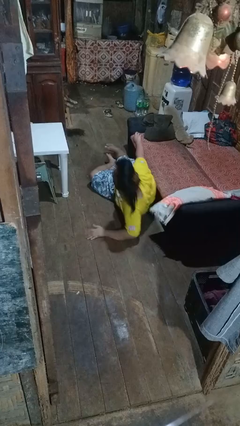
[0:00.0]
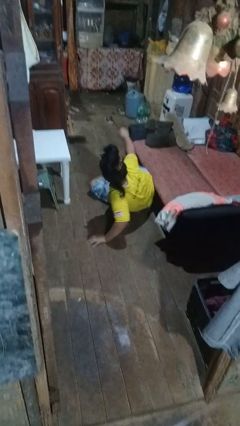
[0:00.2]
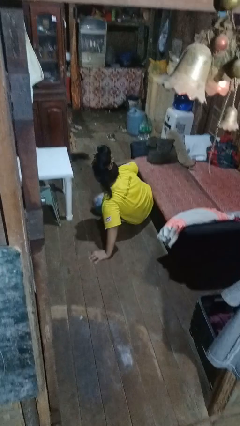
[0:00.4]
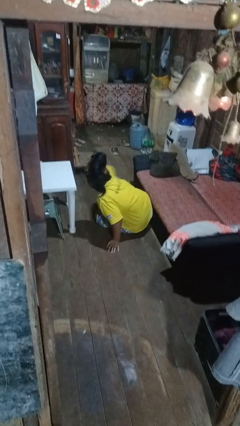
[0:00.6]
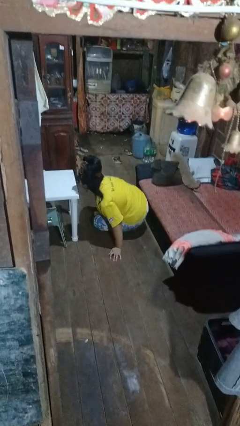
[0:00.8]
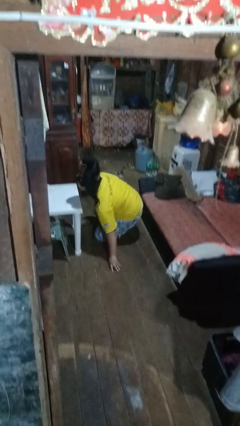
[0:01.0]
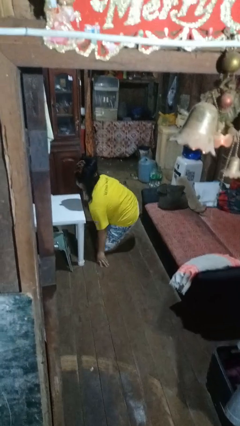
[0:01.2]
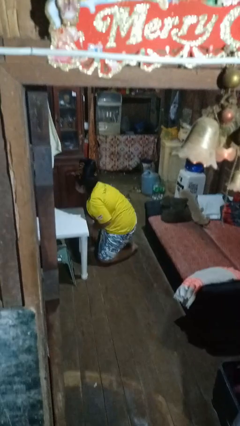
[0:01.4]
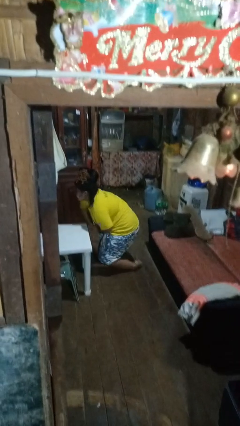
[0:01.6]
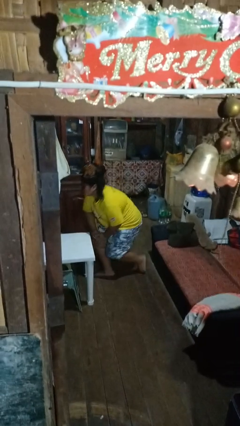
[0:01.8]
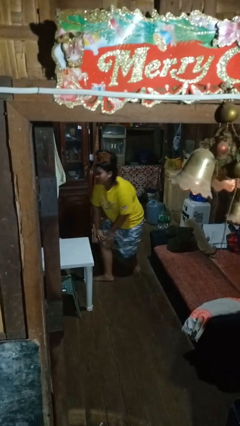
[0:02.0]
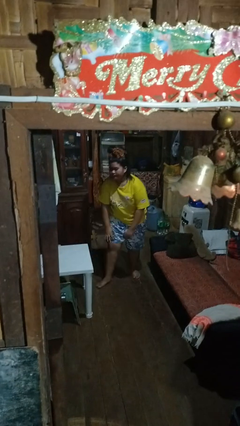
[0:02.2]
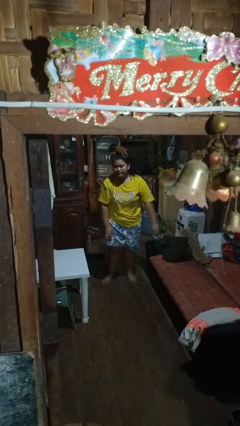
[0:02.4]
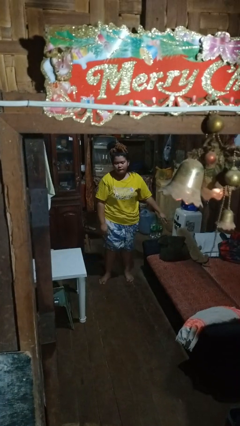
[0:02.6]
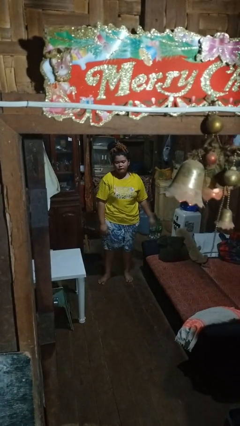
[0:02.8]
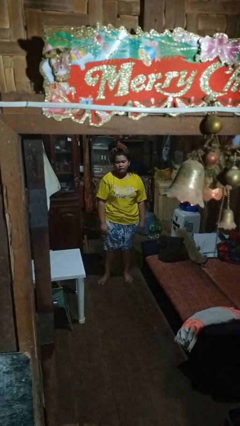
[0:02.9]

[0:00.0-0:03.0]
person stands up from floor

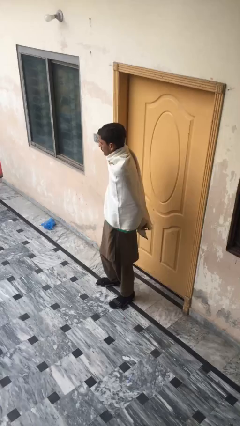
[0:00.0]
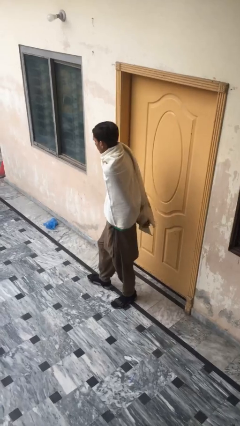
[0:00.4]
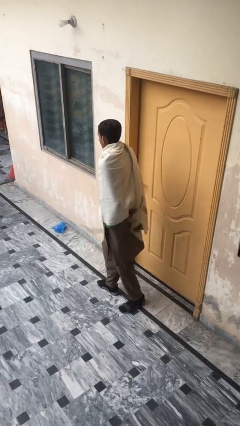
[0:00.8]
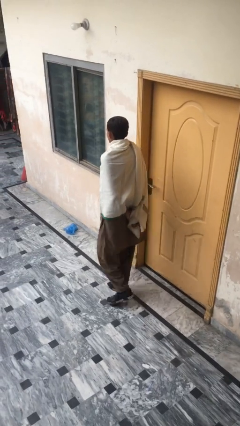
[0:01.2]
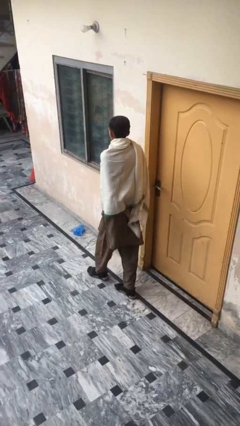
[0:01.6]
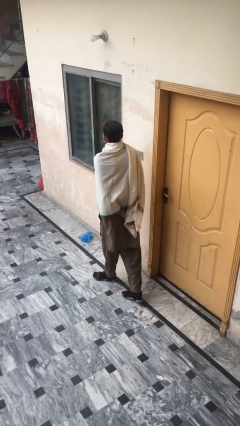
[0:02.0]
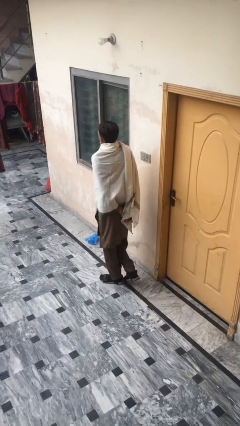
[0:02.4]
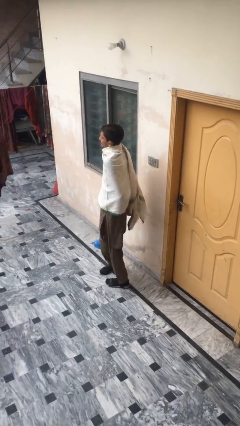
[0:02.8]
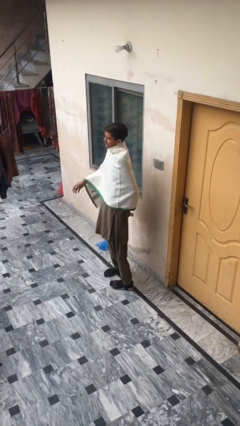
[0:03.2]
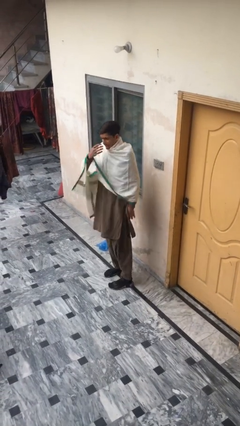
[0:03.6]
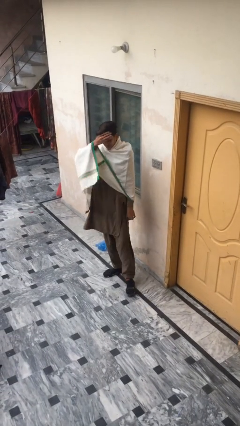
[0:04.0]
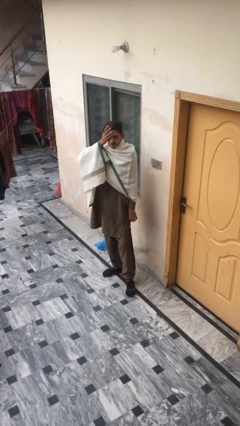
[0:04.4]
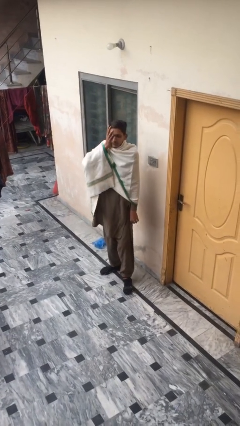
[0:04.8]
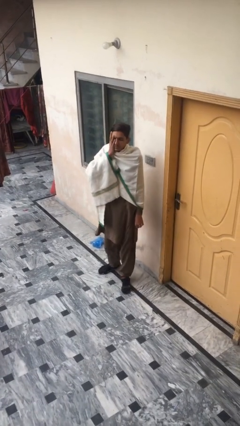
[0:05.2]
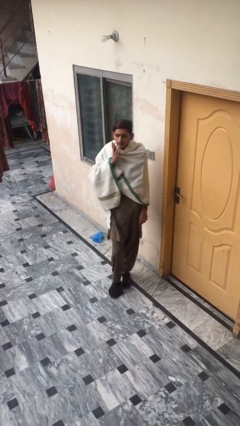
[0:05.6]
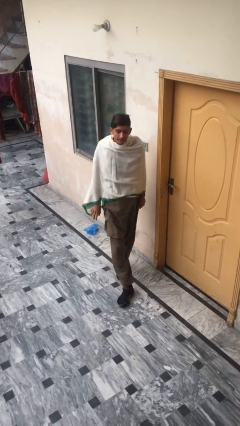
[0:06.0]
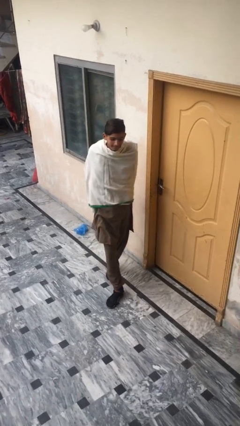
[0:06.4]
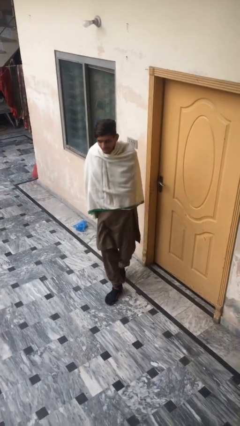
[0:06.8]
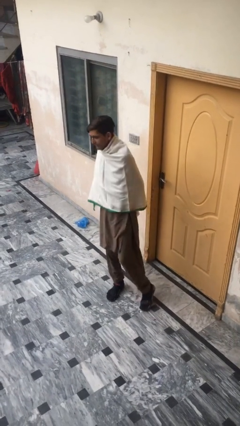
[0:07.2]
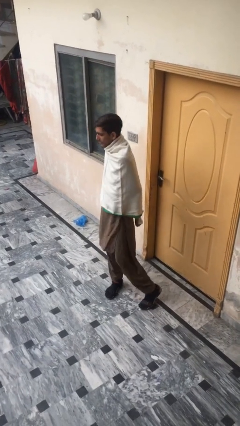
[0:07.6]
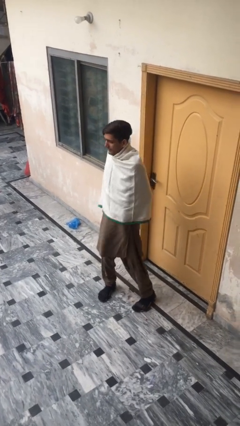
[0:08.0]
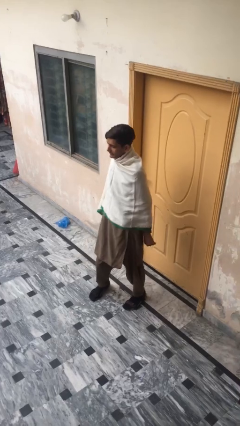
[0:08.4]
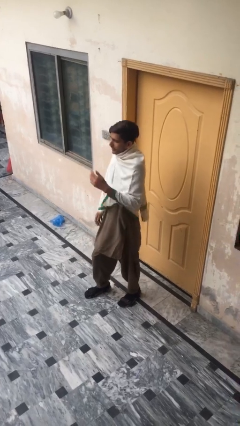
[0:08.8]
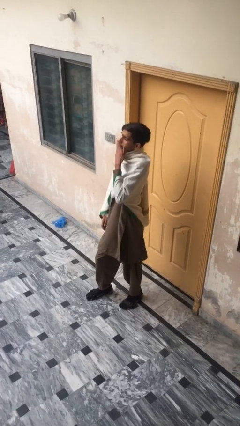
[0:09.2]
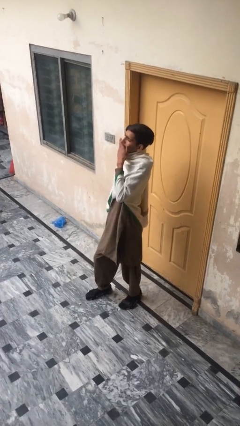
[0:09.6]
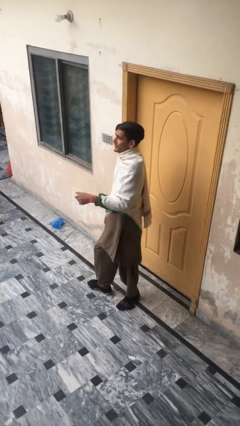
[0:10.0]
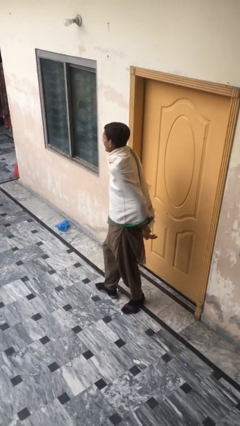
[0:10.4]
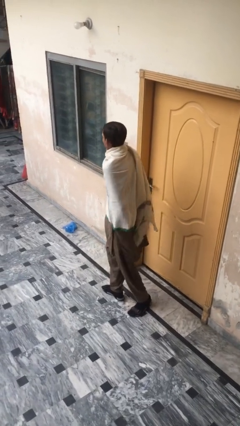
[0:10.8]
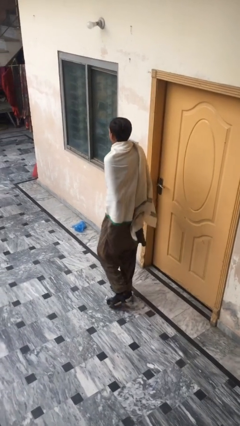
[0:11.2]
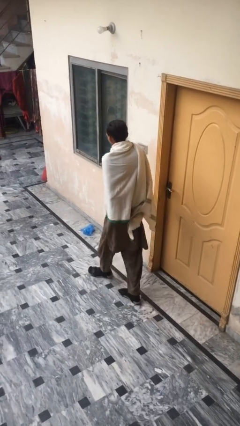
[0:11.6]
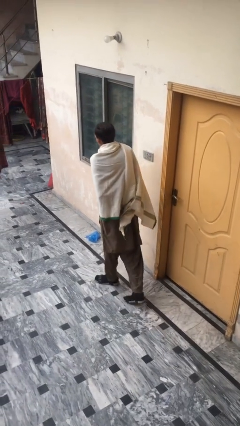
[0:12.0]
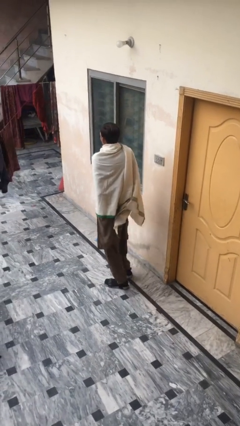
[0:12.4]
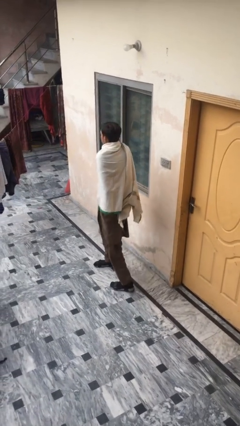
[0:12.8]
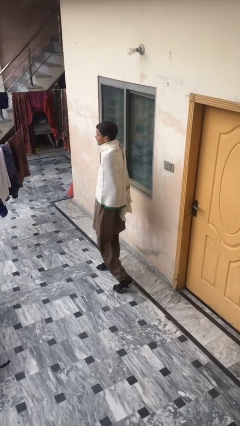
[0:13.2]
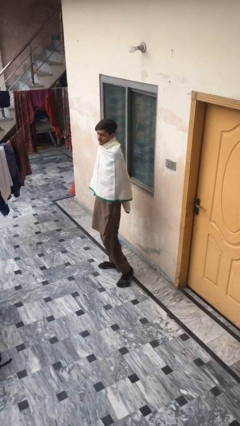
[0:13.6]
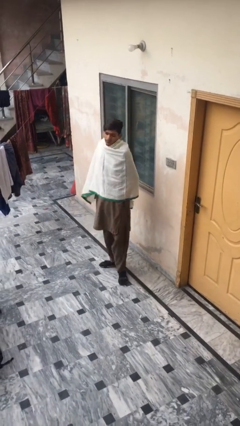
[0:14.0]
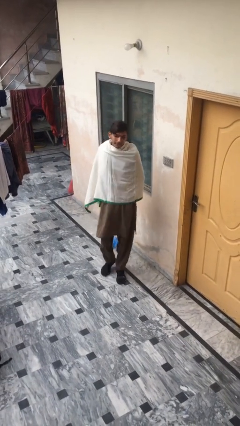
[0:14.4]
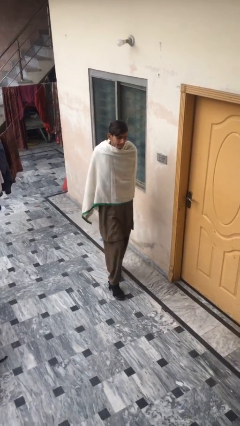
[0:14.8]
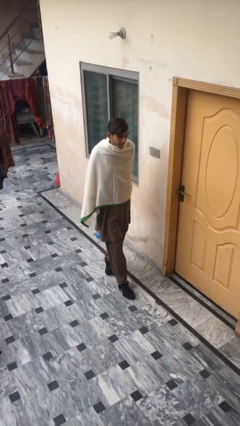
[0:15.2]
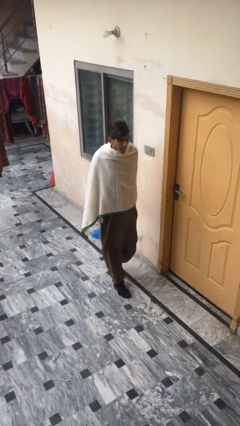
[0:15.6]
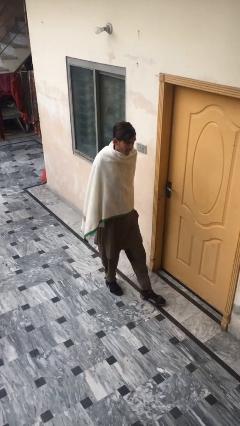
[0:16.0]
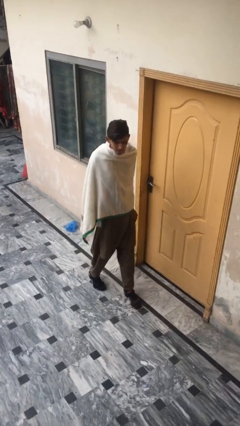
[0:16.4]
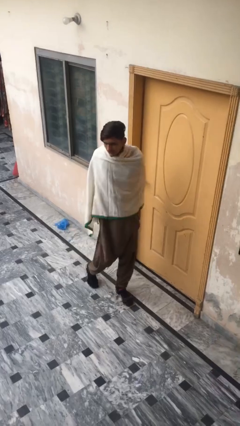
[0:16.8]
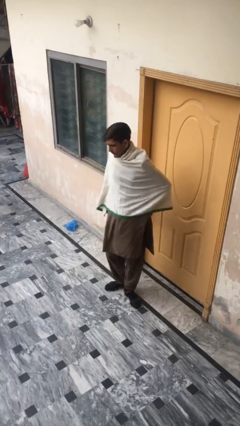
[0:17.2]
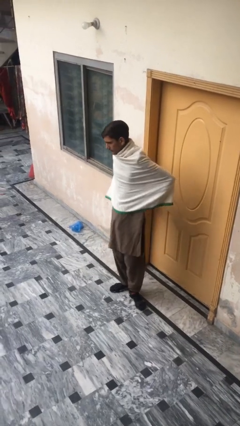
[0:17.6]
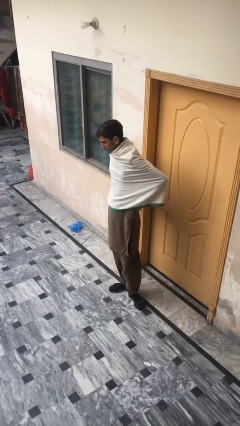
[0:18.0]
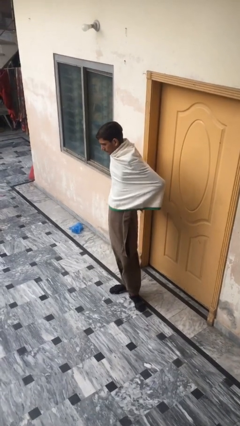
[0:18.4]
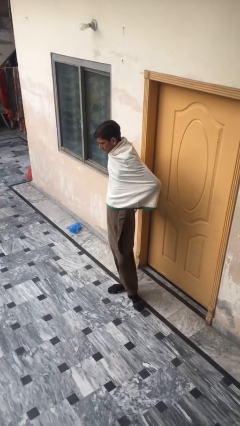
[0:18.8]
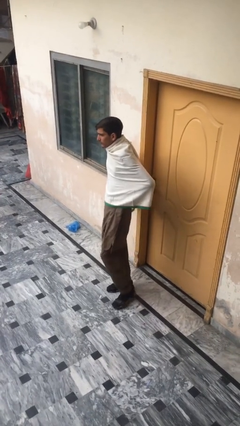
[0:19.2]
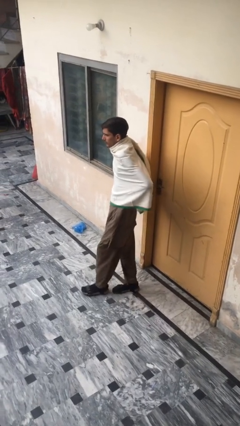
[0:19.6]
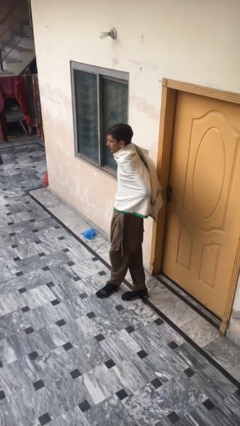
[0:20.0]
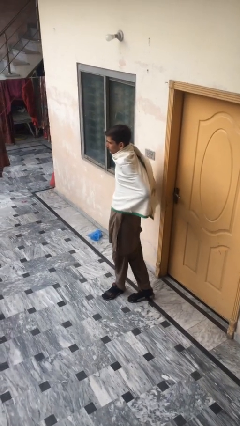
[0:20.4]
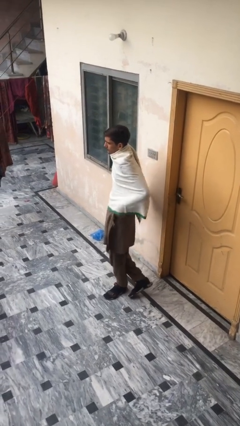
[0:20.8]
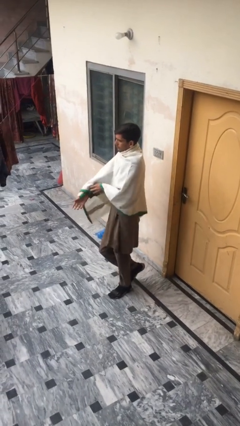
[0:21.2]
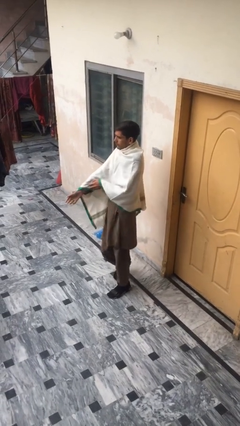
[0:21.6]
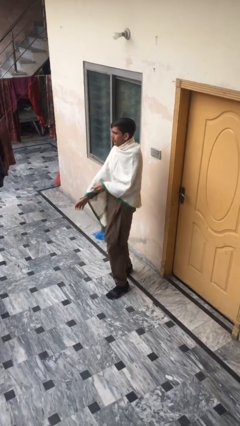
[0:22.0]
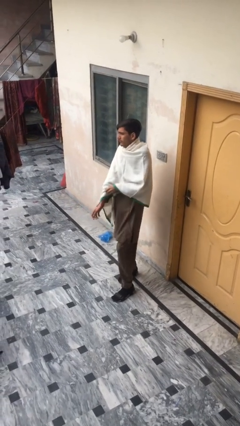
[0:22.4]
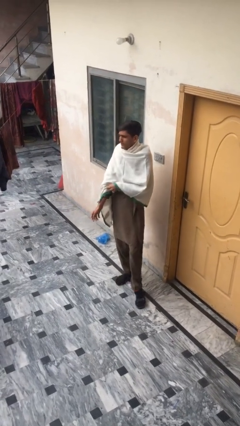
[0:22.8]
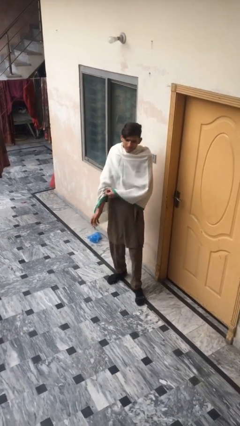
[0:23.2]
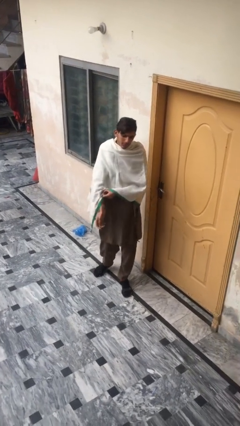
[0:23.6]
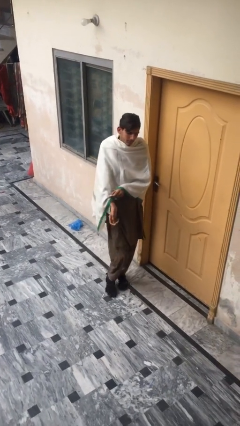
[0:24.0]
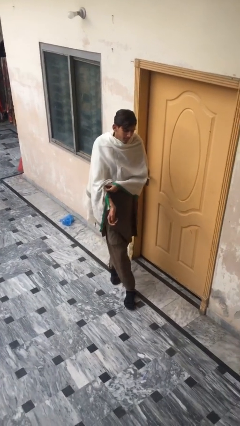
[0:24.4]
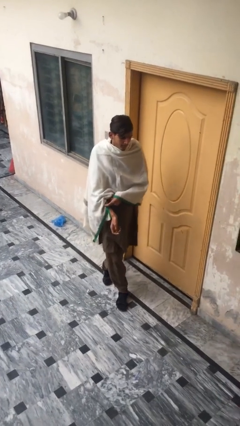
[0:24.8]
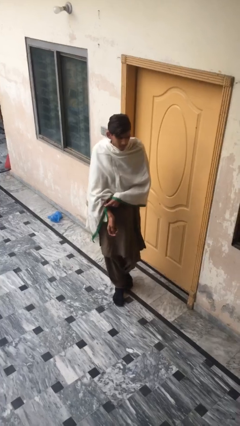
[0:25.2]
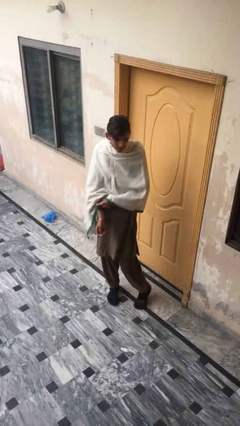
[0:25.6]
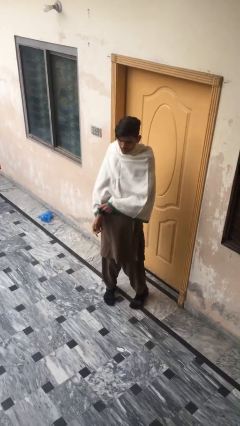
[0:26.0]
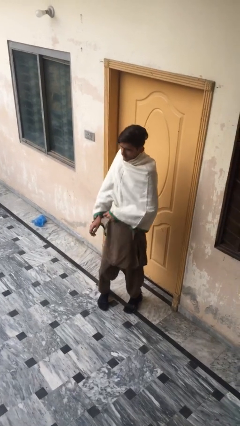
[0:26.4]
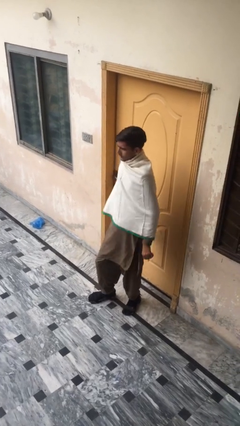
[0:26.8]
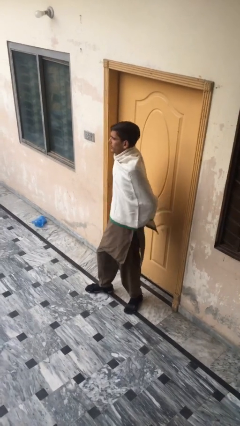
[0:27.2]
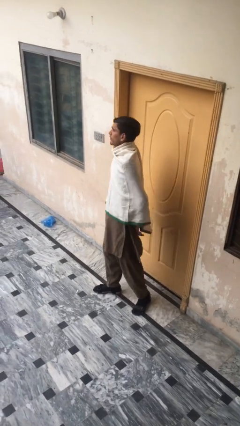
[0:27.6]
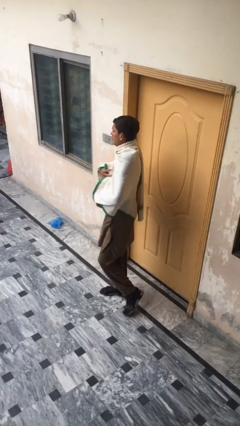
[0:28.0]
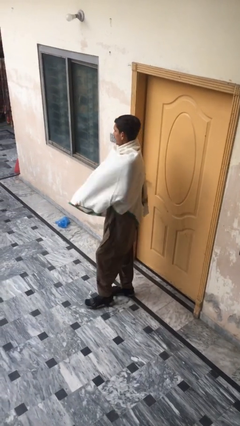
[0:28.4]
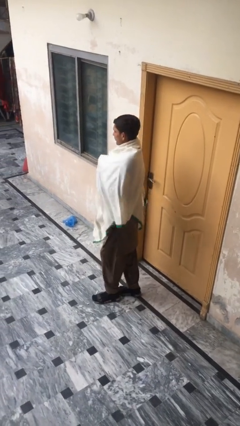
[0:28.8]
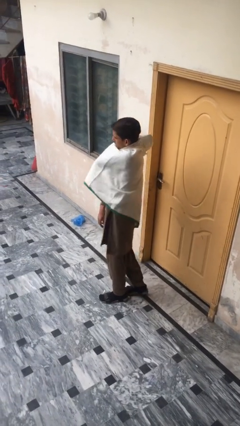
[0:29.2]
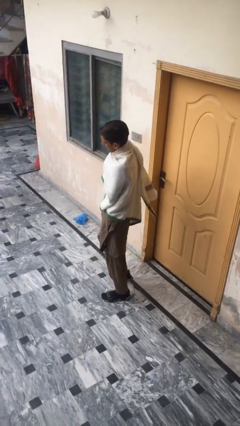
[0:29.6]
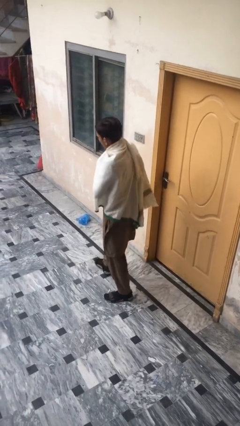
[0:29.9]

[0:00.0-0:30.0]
person walks
